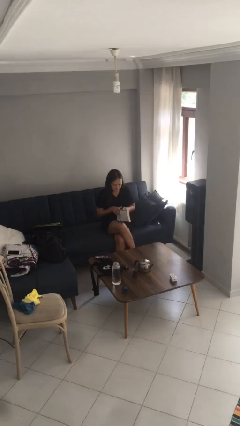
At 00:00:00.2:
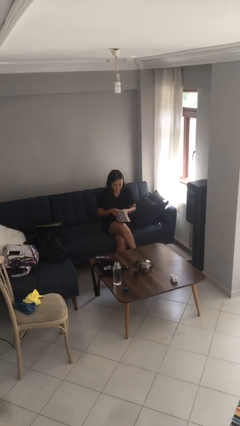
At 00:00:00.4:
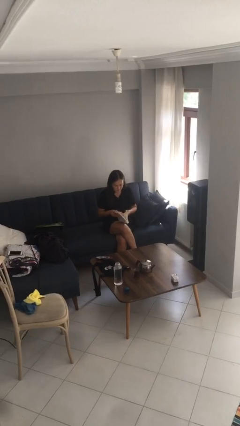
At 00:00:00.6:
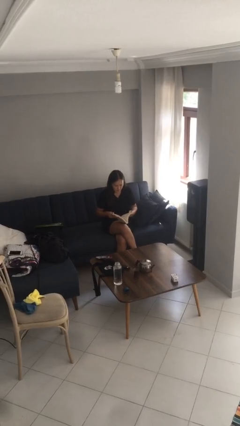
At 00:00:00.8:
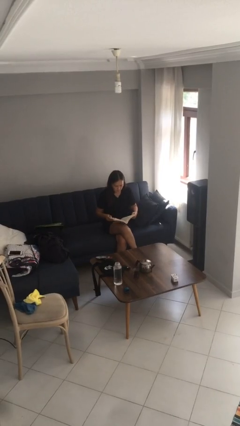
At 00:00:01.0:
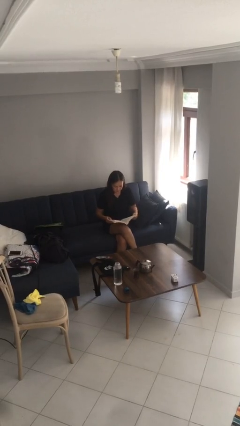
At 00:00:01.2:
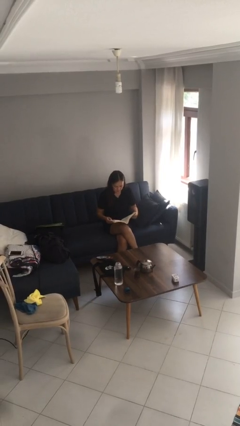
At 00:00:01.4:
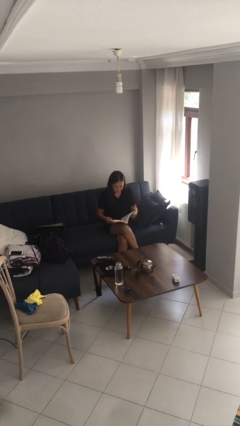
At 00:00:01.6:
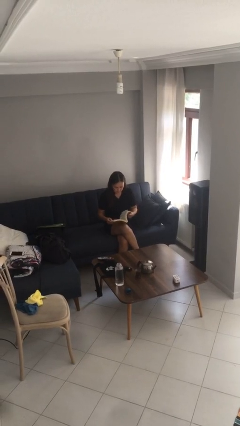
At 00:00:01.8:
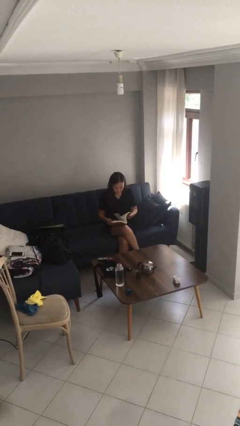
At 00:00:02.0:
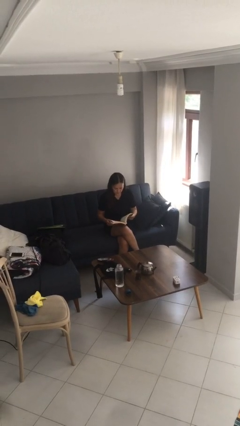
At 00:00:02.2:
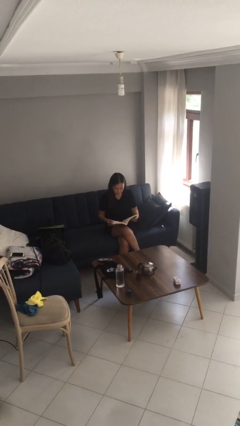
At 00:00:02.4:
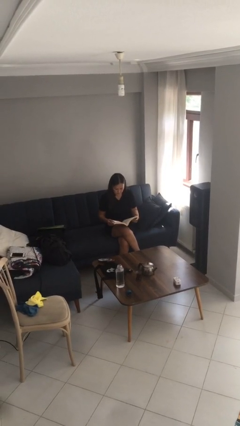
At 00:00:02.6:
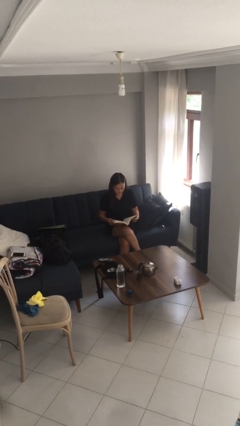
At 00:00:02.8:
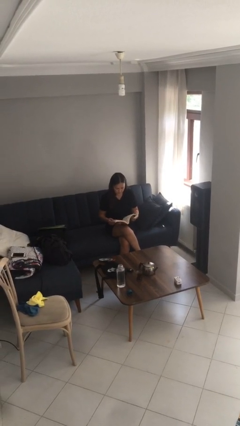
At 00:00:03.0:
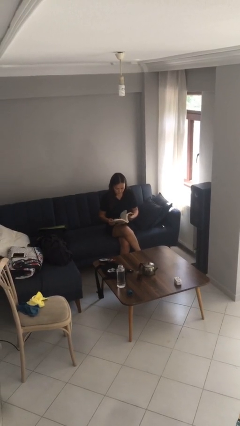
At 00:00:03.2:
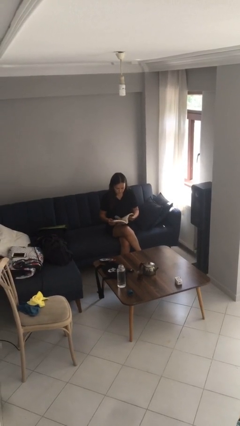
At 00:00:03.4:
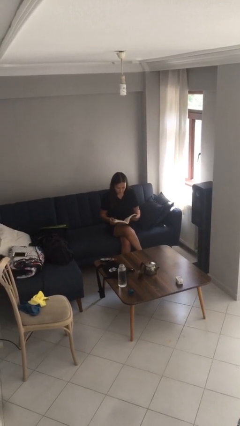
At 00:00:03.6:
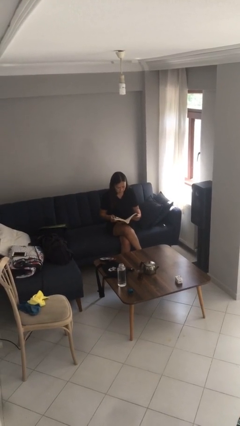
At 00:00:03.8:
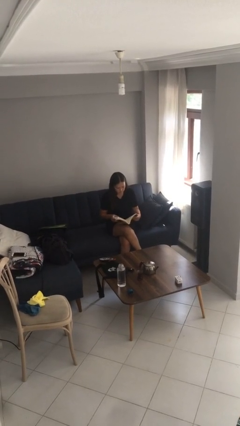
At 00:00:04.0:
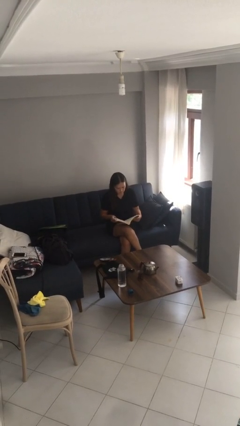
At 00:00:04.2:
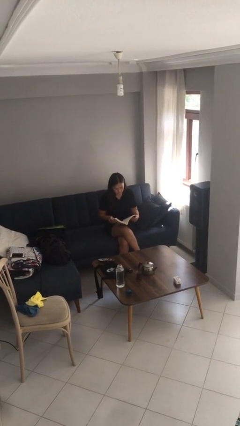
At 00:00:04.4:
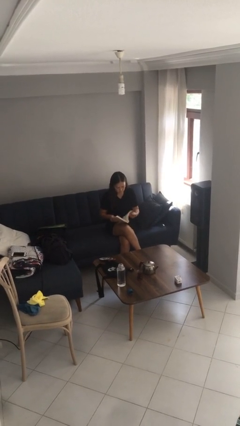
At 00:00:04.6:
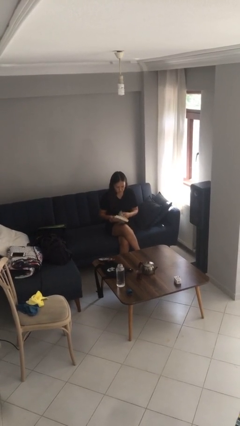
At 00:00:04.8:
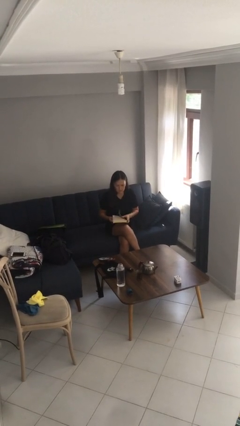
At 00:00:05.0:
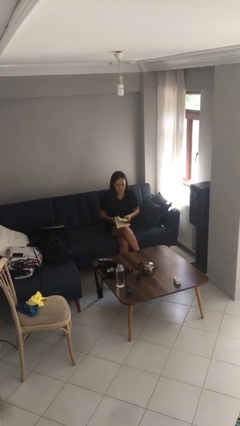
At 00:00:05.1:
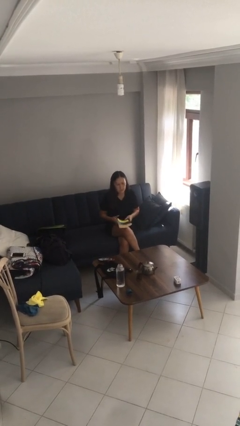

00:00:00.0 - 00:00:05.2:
person reads document

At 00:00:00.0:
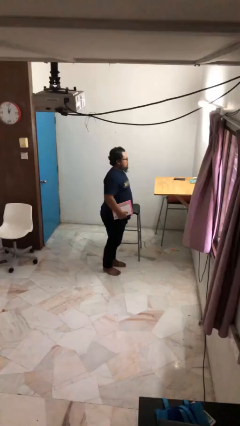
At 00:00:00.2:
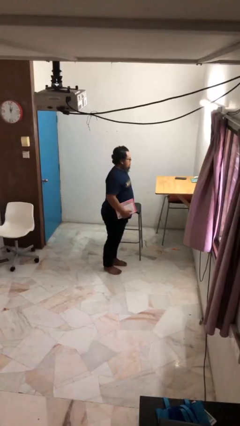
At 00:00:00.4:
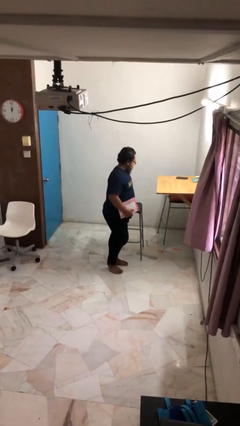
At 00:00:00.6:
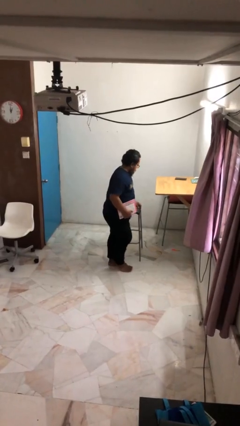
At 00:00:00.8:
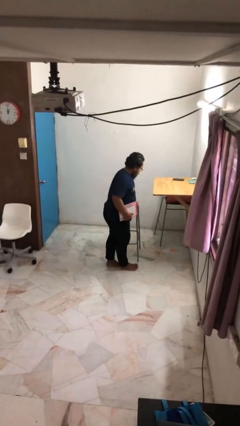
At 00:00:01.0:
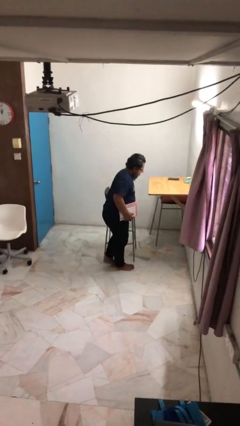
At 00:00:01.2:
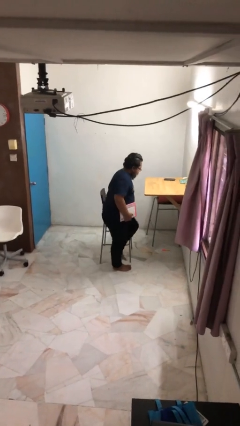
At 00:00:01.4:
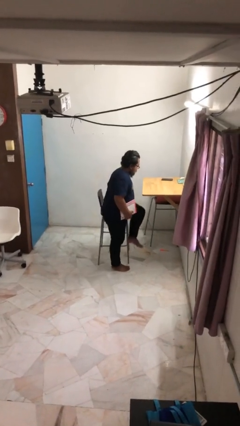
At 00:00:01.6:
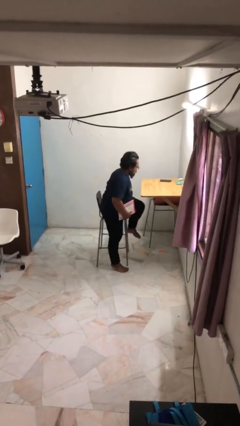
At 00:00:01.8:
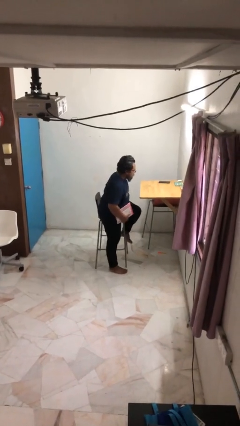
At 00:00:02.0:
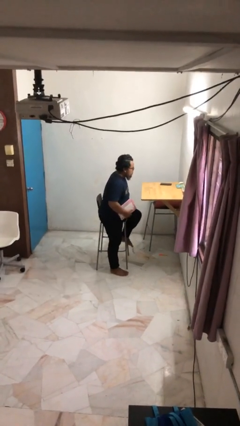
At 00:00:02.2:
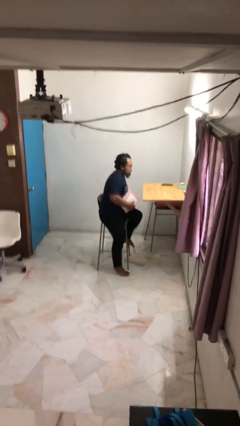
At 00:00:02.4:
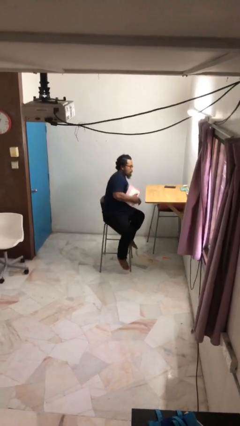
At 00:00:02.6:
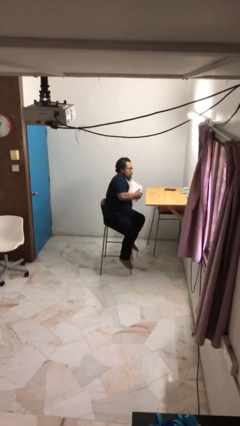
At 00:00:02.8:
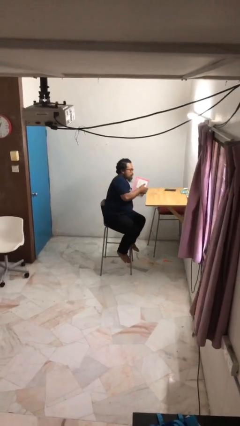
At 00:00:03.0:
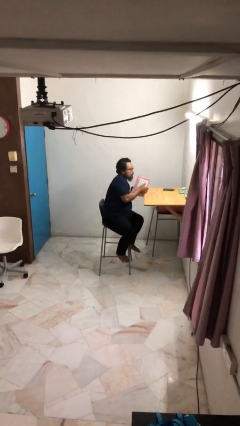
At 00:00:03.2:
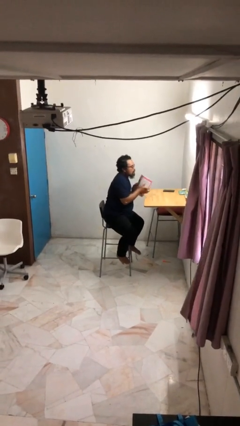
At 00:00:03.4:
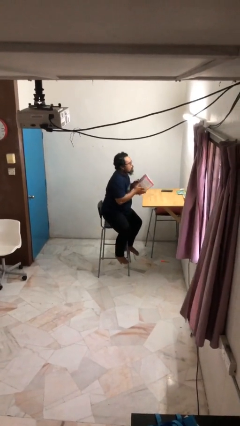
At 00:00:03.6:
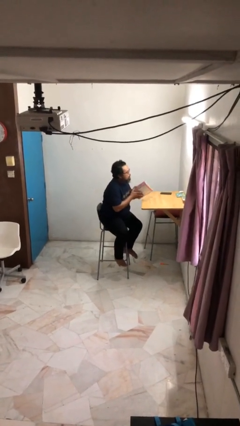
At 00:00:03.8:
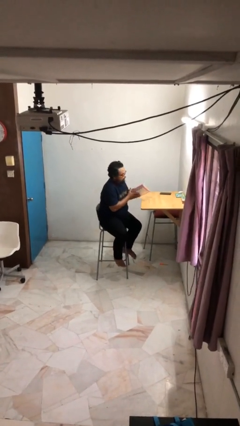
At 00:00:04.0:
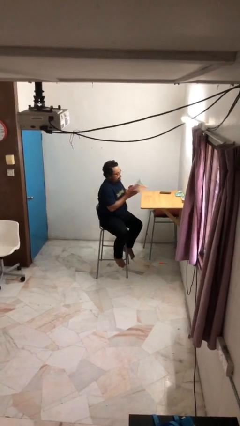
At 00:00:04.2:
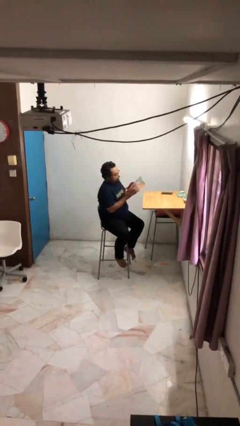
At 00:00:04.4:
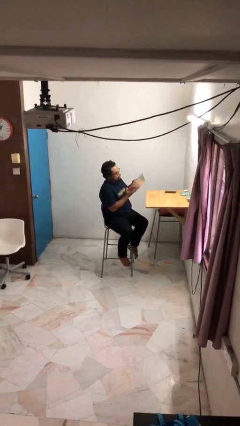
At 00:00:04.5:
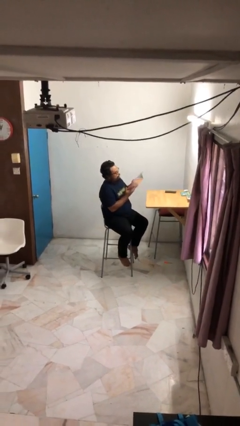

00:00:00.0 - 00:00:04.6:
person sits down

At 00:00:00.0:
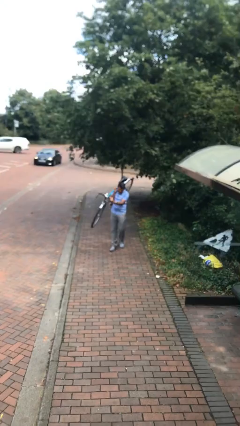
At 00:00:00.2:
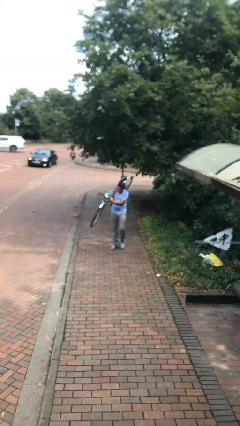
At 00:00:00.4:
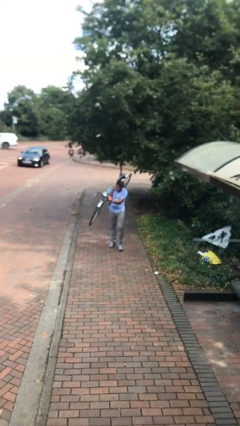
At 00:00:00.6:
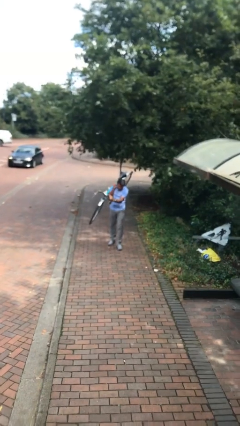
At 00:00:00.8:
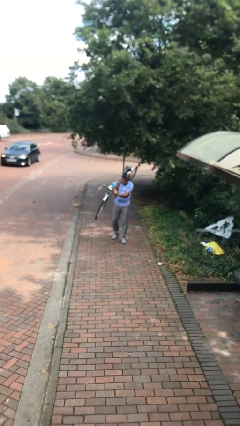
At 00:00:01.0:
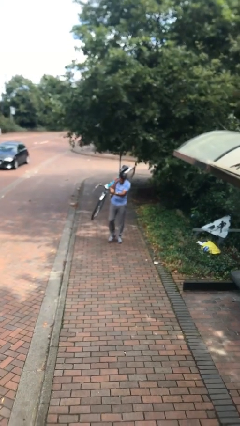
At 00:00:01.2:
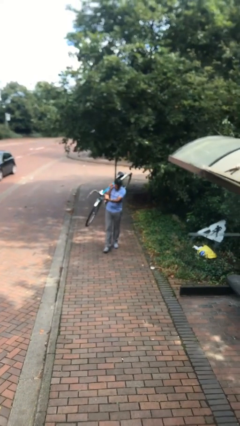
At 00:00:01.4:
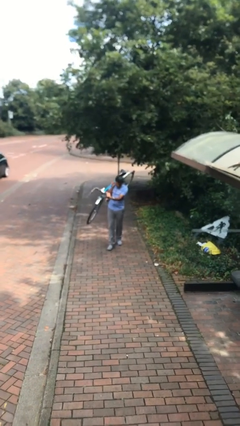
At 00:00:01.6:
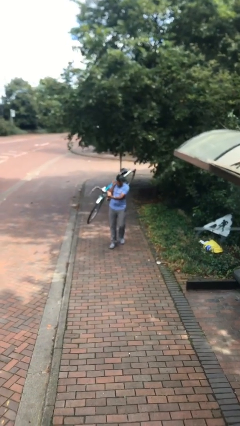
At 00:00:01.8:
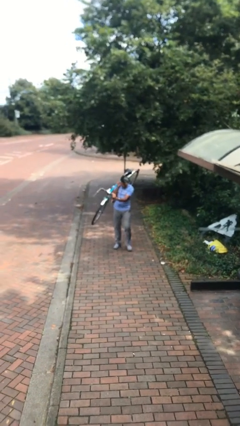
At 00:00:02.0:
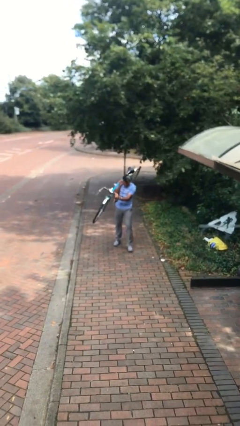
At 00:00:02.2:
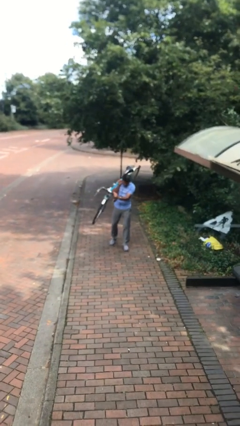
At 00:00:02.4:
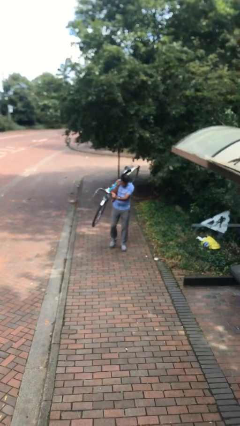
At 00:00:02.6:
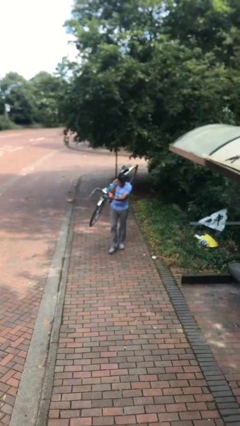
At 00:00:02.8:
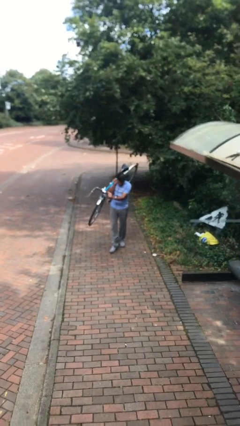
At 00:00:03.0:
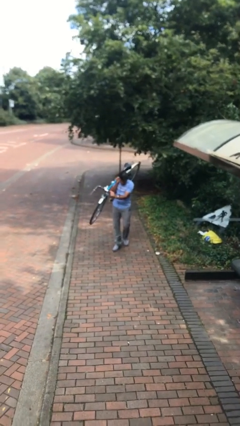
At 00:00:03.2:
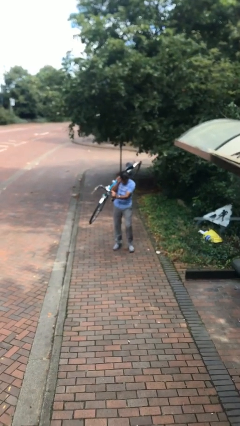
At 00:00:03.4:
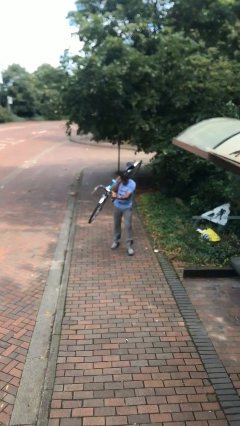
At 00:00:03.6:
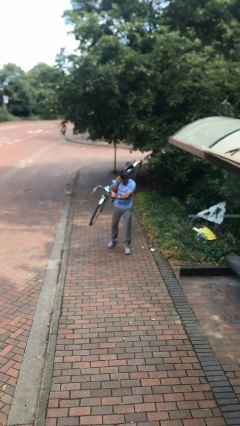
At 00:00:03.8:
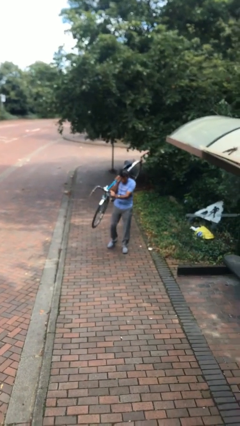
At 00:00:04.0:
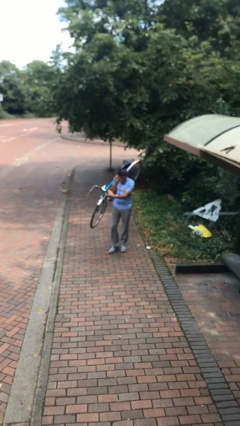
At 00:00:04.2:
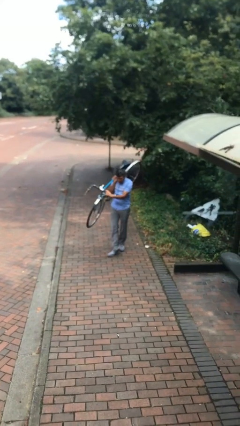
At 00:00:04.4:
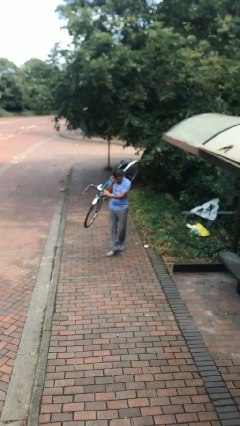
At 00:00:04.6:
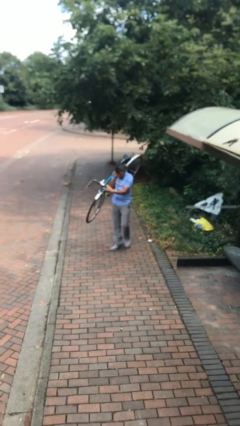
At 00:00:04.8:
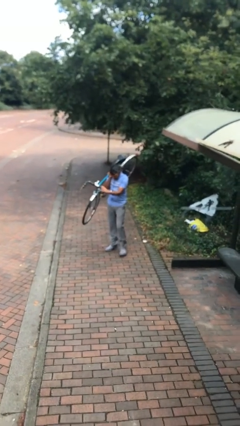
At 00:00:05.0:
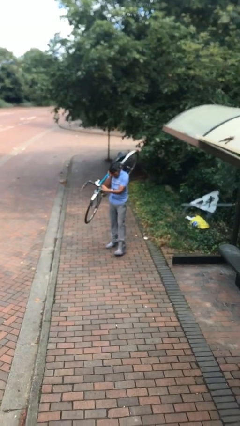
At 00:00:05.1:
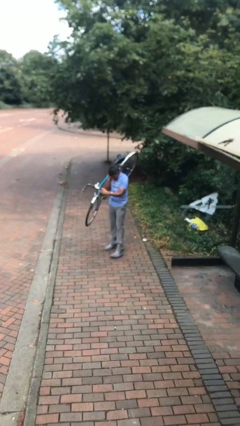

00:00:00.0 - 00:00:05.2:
person carries heavy object

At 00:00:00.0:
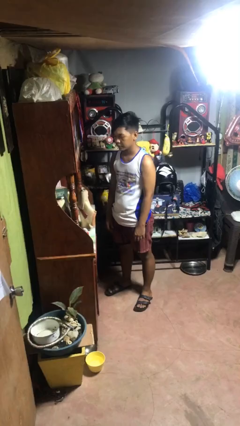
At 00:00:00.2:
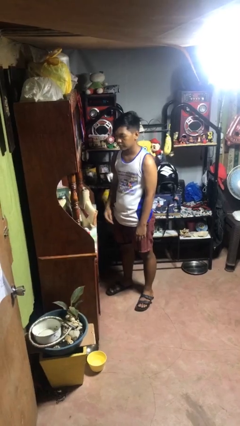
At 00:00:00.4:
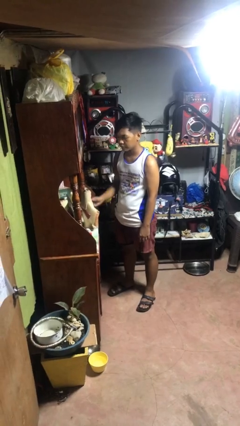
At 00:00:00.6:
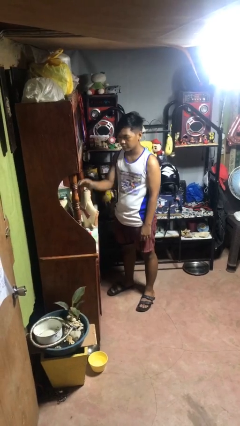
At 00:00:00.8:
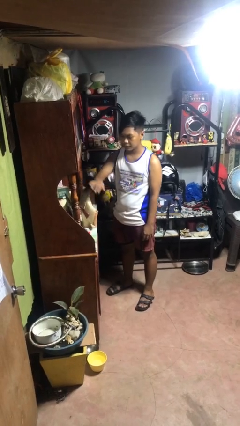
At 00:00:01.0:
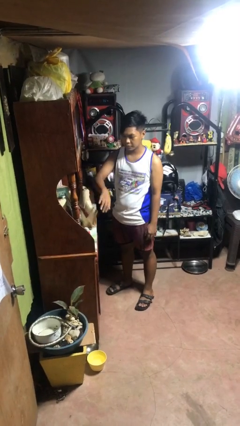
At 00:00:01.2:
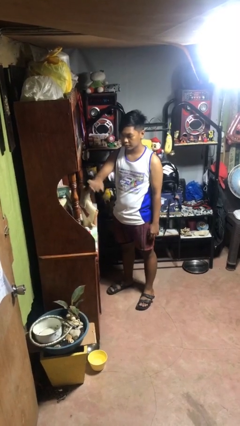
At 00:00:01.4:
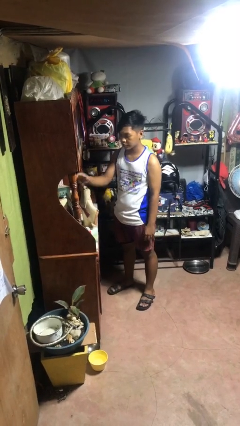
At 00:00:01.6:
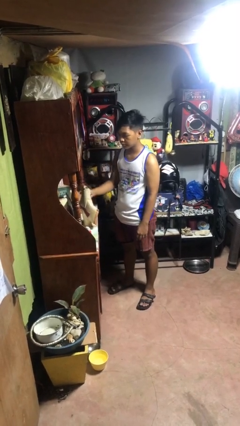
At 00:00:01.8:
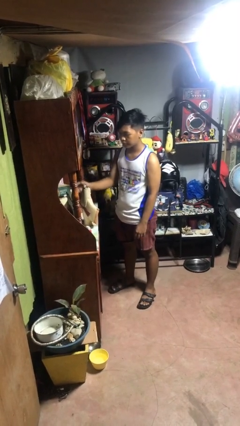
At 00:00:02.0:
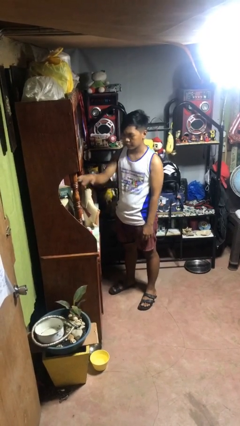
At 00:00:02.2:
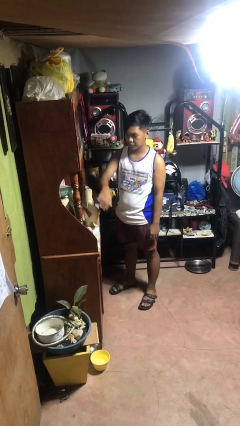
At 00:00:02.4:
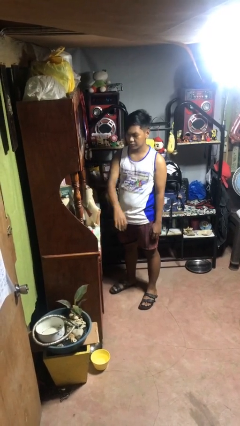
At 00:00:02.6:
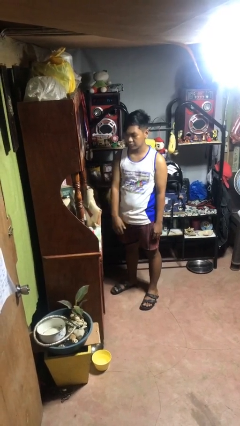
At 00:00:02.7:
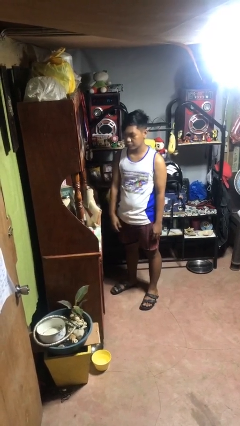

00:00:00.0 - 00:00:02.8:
person waves hand over object
